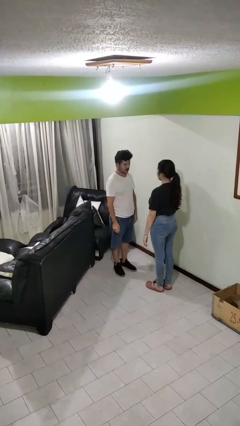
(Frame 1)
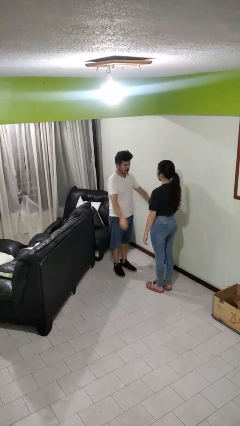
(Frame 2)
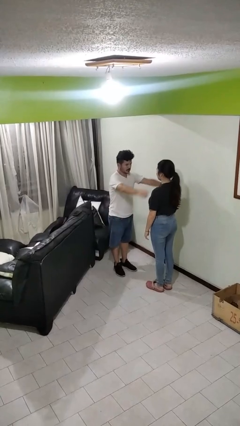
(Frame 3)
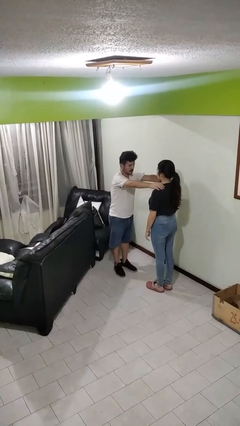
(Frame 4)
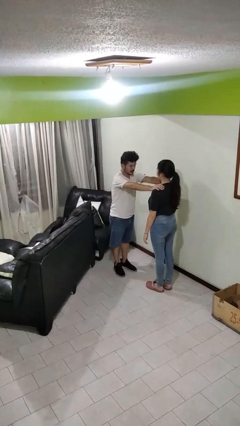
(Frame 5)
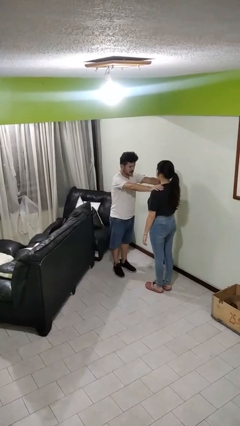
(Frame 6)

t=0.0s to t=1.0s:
person grabs person by shoulder

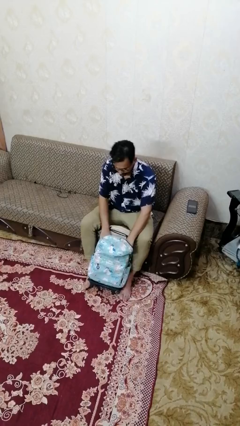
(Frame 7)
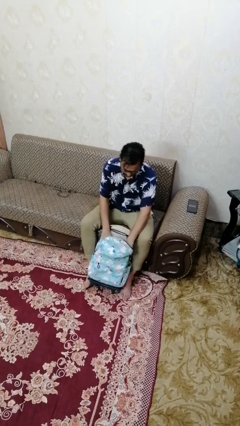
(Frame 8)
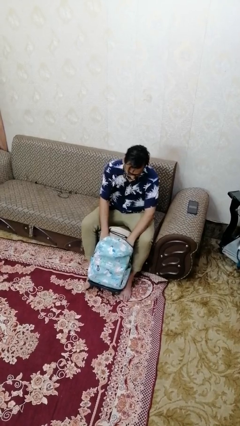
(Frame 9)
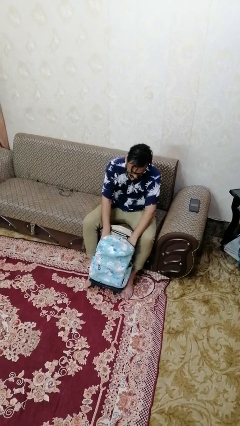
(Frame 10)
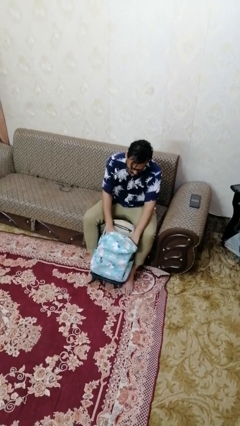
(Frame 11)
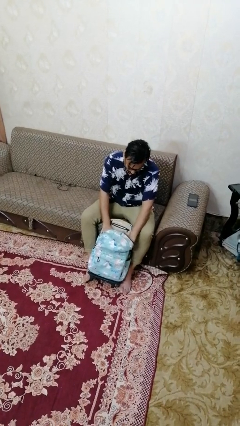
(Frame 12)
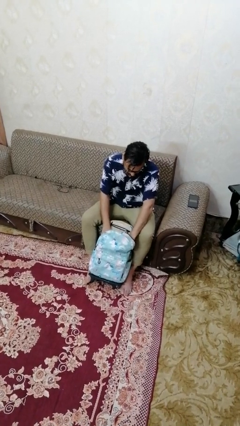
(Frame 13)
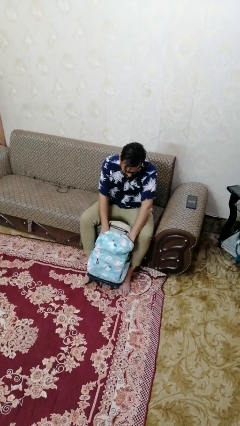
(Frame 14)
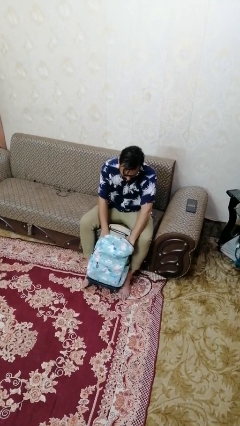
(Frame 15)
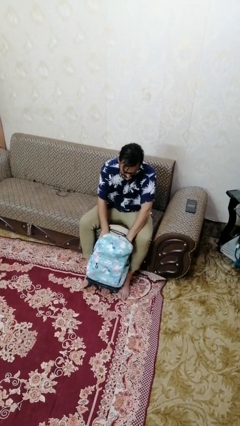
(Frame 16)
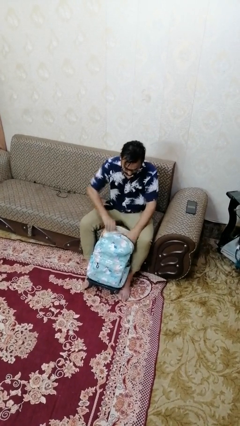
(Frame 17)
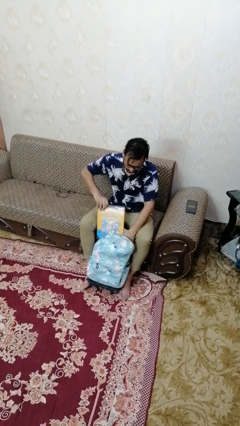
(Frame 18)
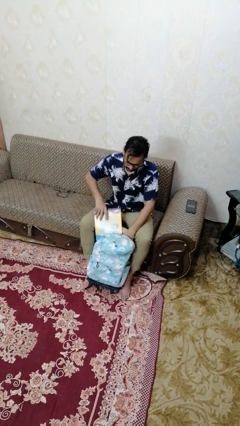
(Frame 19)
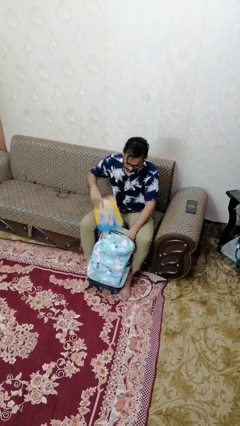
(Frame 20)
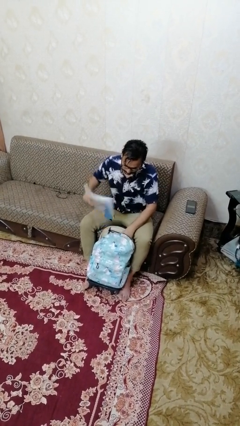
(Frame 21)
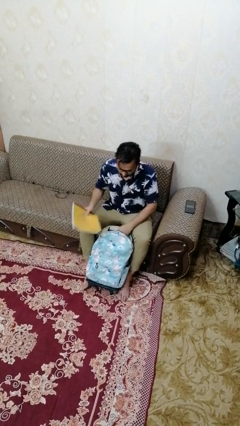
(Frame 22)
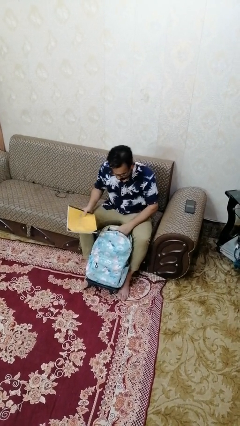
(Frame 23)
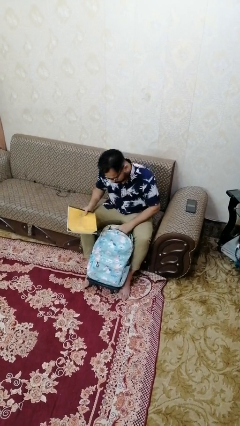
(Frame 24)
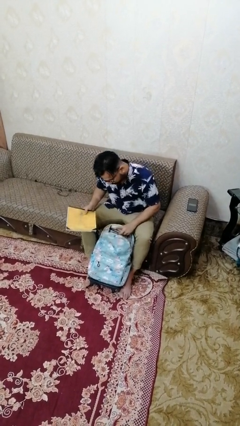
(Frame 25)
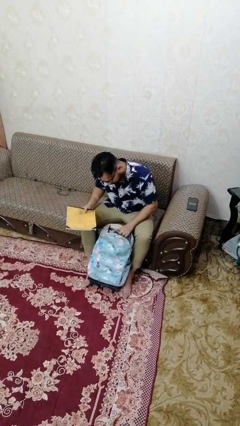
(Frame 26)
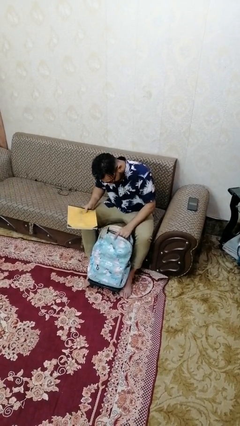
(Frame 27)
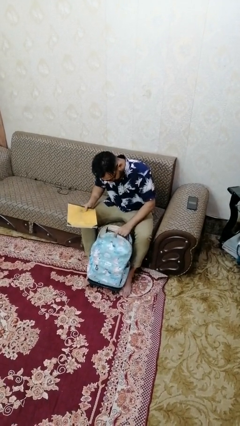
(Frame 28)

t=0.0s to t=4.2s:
person takes object from backpack

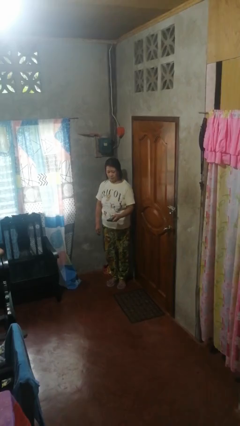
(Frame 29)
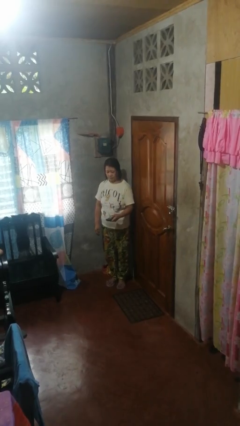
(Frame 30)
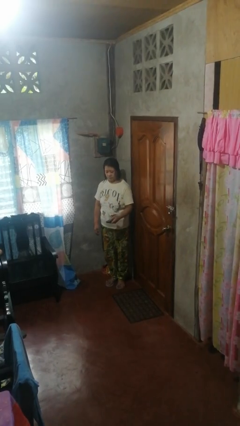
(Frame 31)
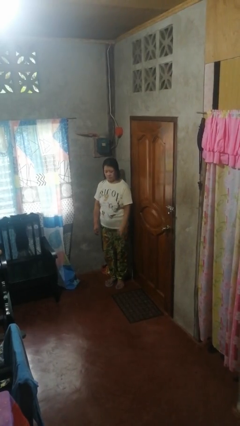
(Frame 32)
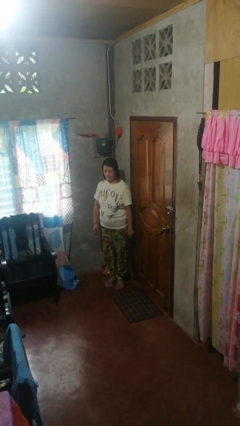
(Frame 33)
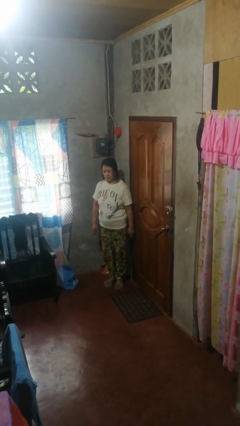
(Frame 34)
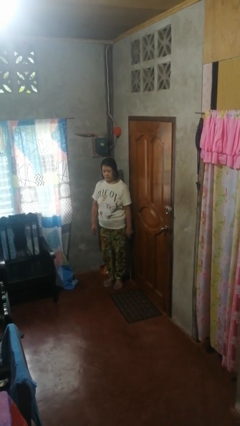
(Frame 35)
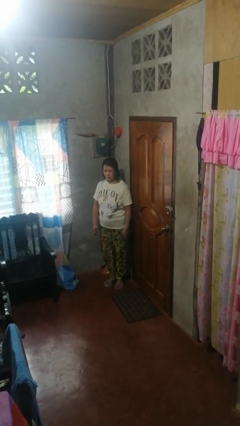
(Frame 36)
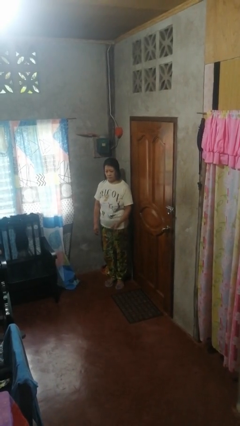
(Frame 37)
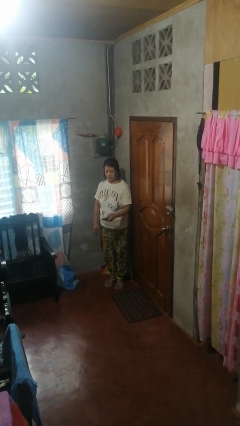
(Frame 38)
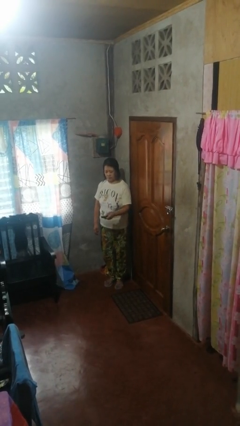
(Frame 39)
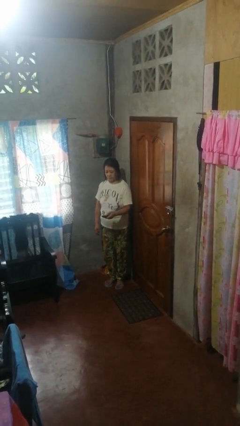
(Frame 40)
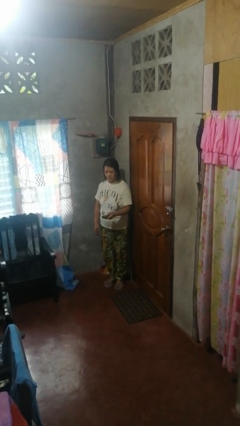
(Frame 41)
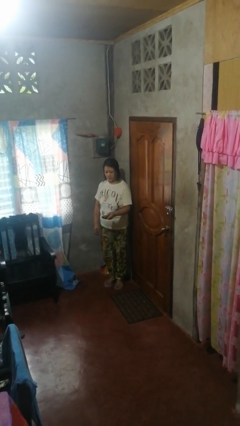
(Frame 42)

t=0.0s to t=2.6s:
person uses television remote

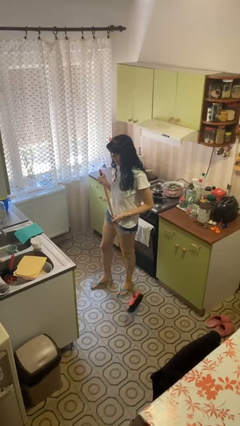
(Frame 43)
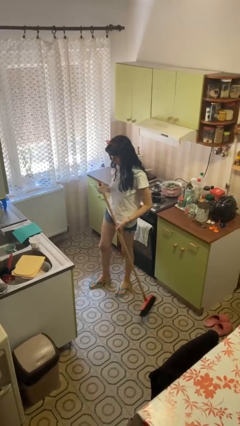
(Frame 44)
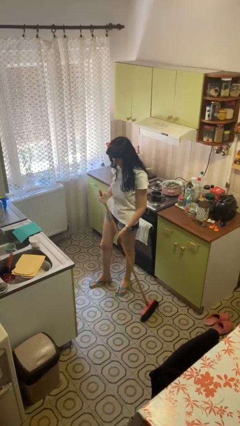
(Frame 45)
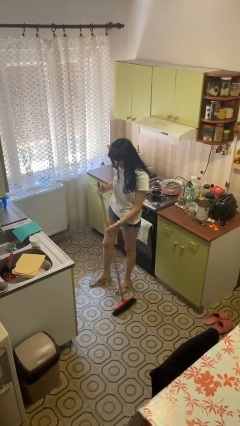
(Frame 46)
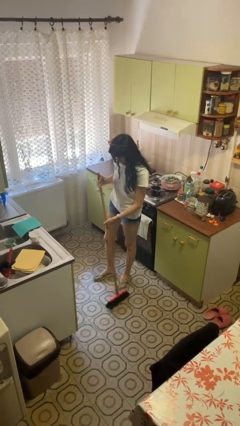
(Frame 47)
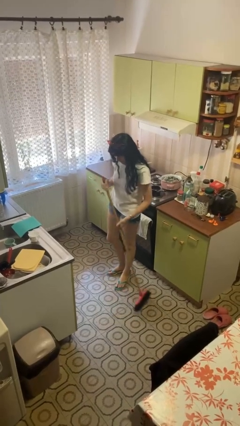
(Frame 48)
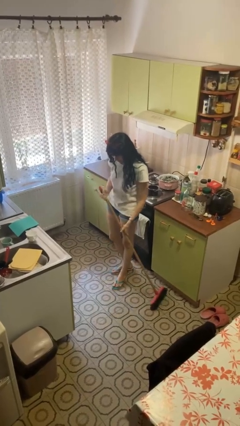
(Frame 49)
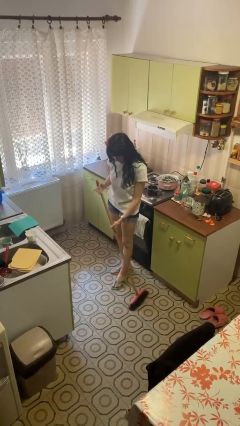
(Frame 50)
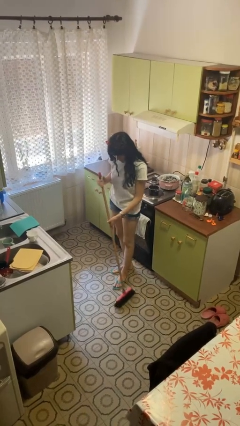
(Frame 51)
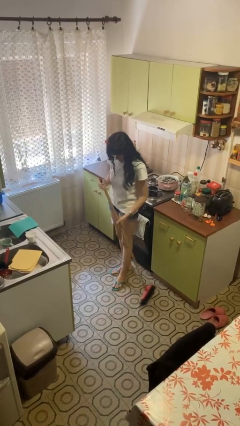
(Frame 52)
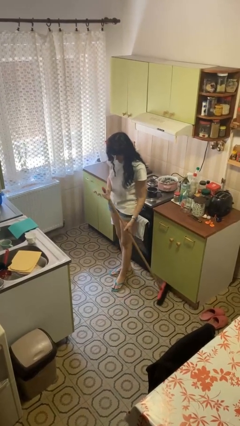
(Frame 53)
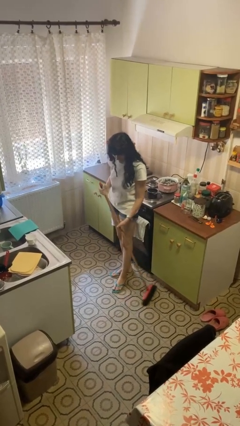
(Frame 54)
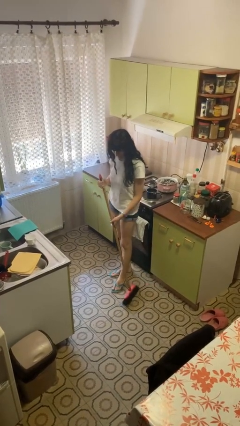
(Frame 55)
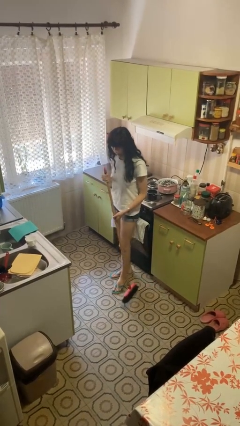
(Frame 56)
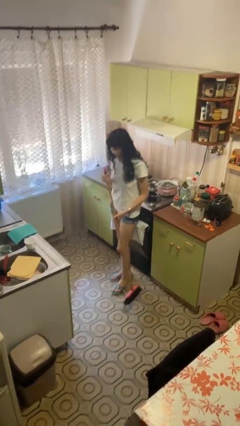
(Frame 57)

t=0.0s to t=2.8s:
person sweeps floor

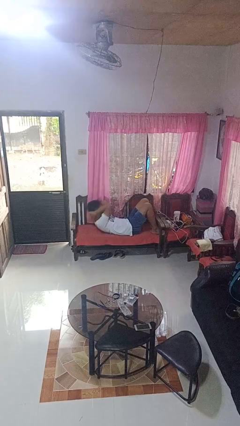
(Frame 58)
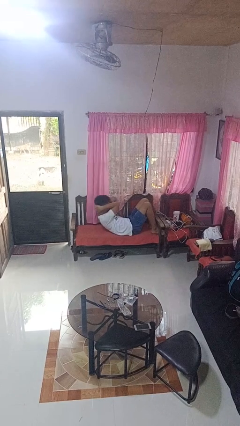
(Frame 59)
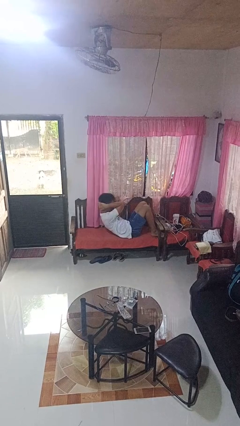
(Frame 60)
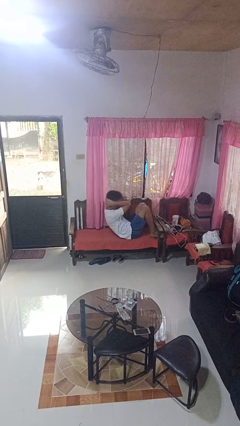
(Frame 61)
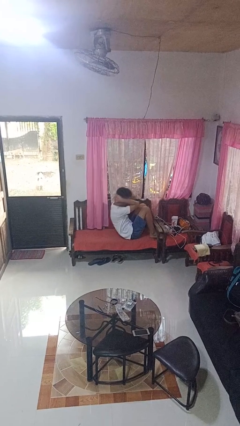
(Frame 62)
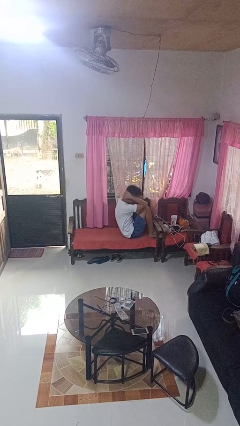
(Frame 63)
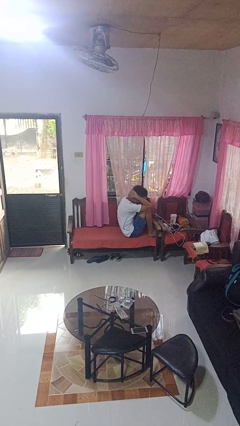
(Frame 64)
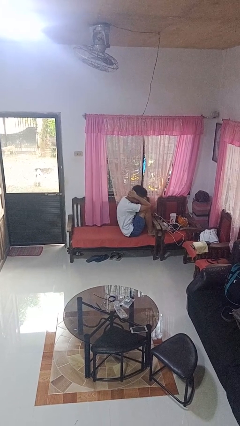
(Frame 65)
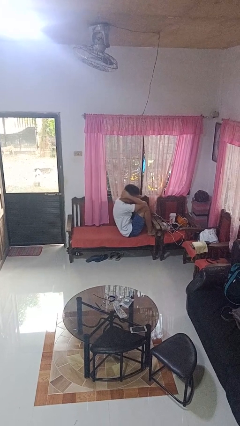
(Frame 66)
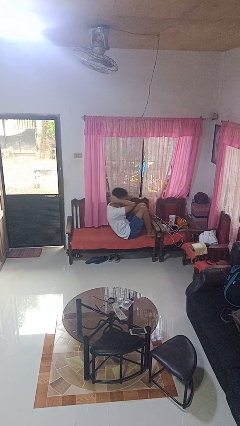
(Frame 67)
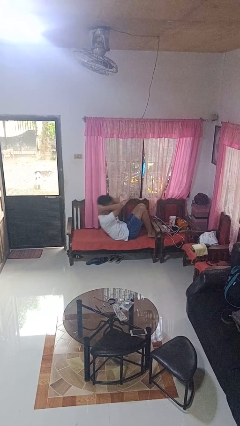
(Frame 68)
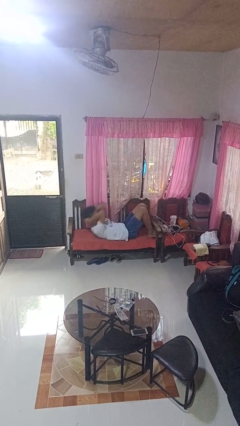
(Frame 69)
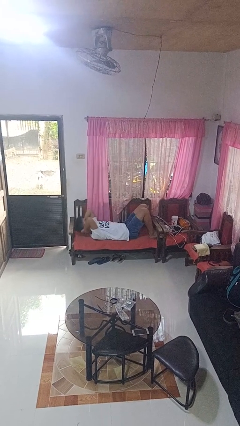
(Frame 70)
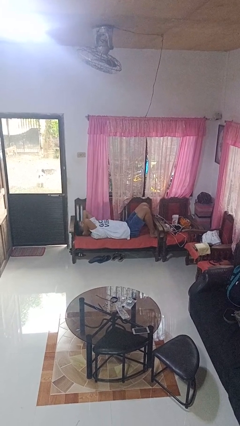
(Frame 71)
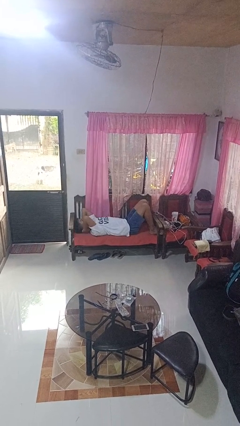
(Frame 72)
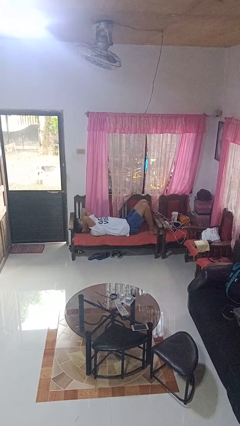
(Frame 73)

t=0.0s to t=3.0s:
person exercises with situp

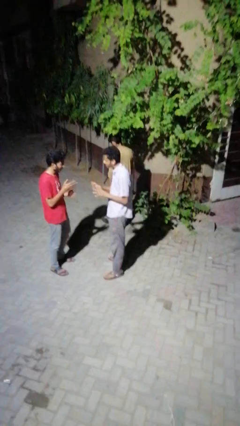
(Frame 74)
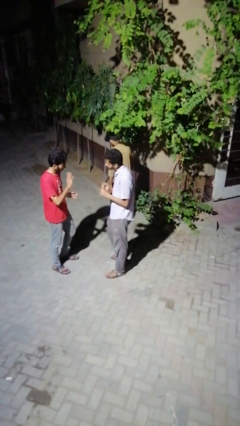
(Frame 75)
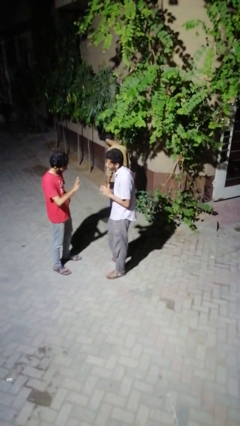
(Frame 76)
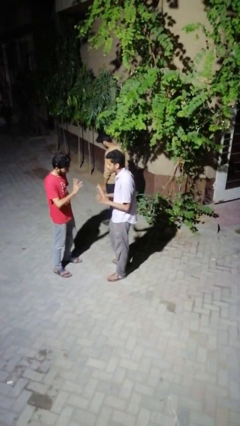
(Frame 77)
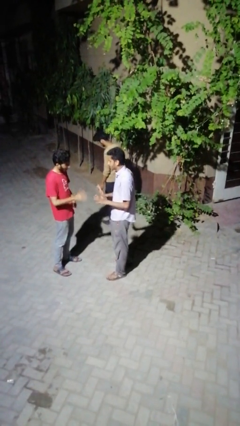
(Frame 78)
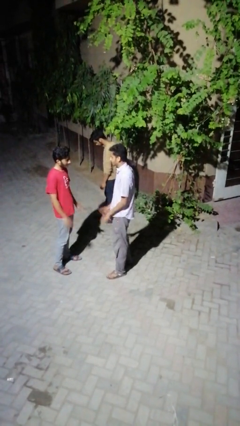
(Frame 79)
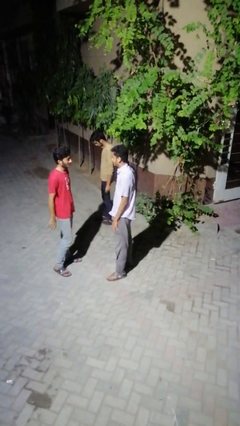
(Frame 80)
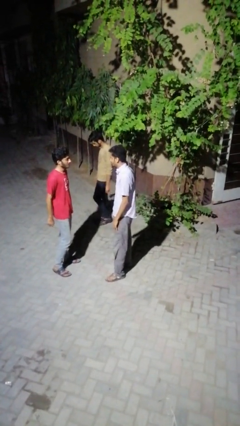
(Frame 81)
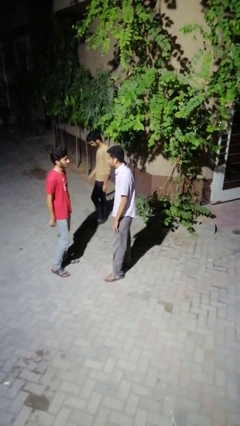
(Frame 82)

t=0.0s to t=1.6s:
person talks to person

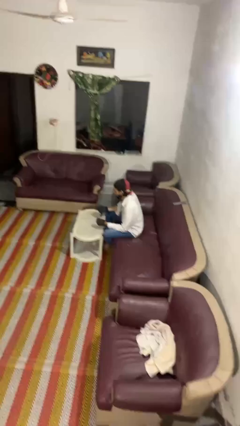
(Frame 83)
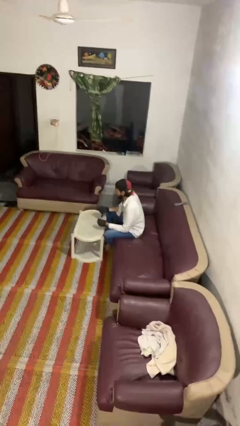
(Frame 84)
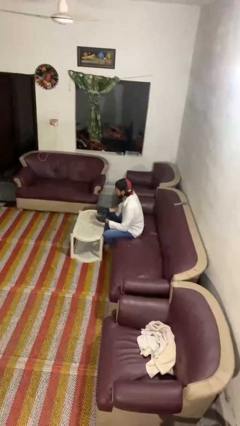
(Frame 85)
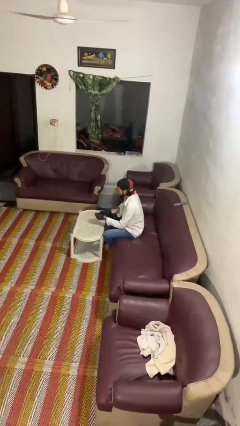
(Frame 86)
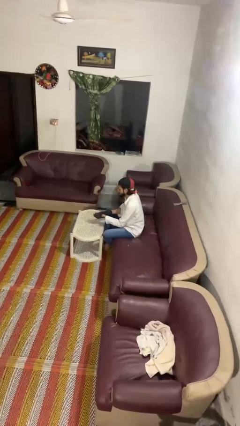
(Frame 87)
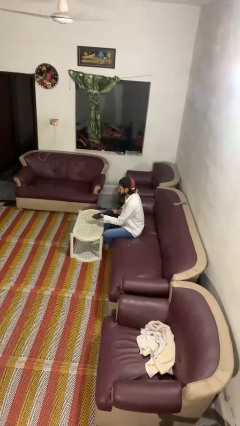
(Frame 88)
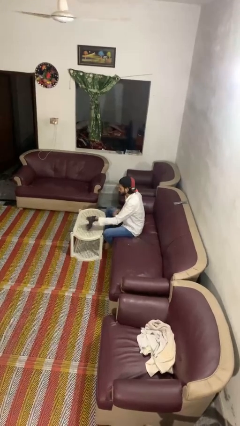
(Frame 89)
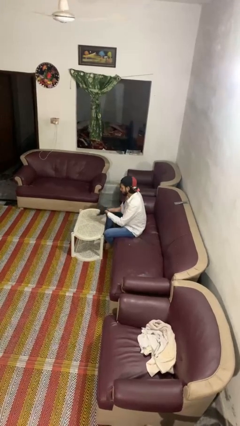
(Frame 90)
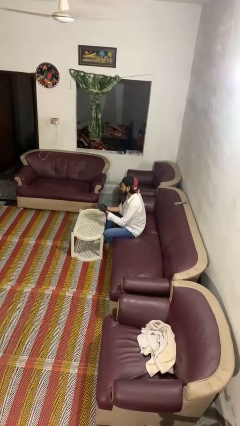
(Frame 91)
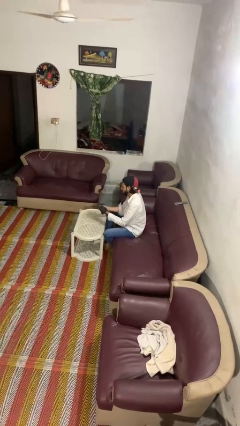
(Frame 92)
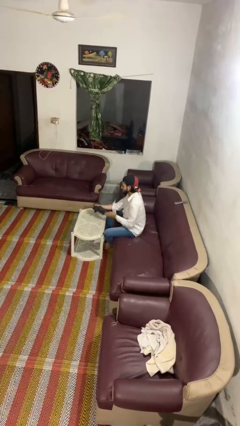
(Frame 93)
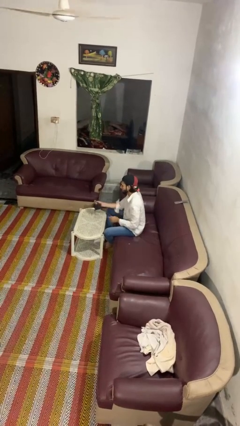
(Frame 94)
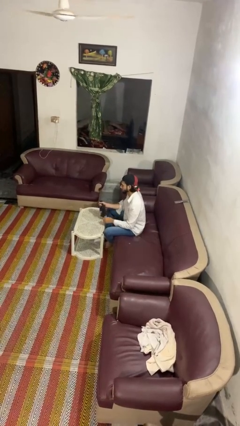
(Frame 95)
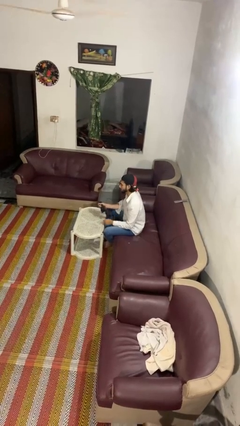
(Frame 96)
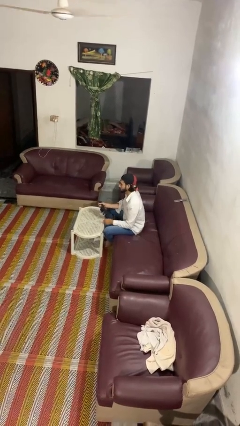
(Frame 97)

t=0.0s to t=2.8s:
person takes off gloves
